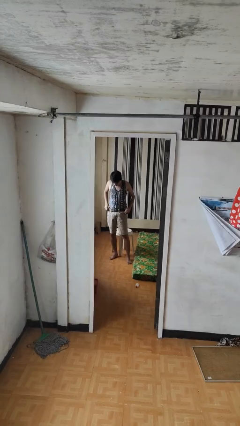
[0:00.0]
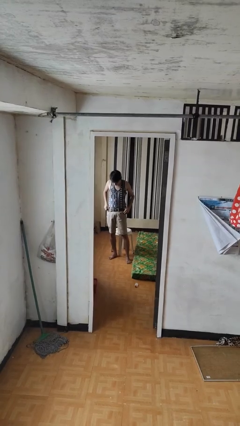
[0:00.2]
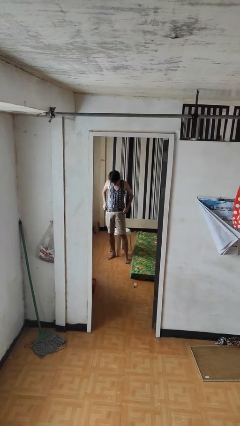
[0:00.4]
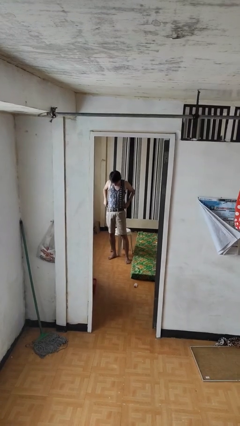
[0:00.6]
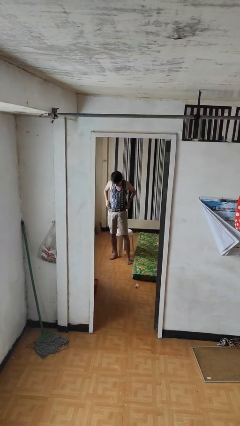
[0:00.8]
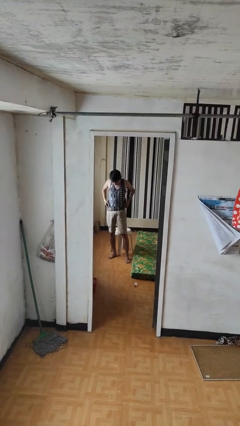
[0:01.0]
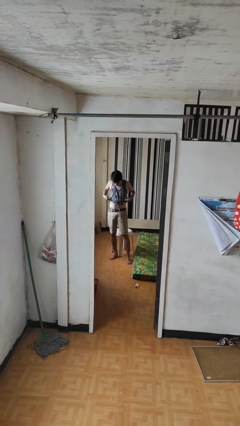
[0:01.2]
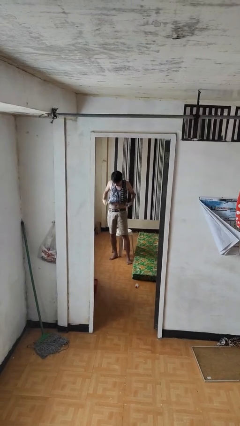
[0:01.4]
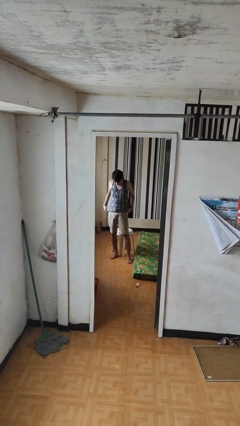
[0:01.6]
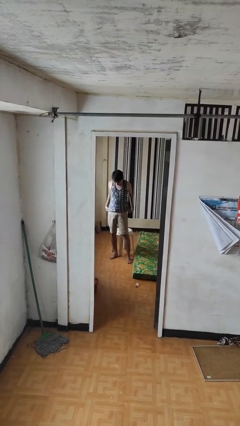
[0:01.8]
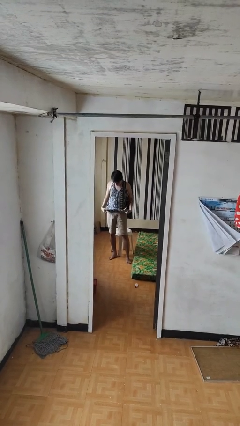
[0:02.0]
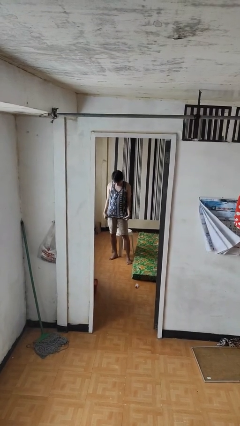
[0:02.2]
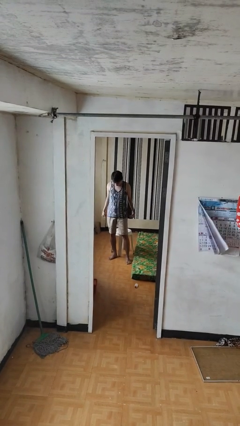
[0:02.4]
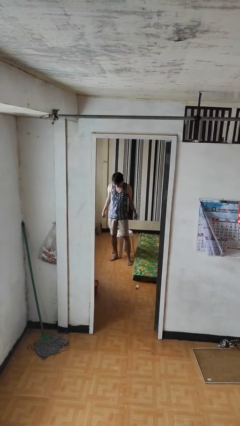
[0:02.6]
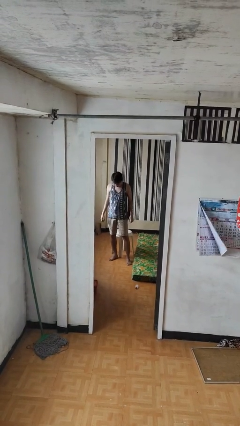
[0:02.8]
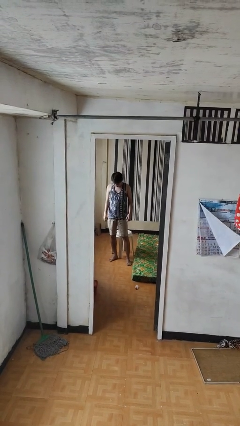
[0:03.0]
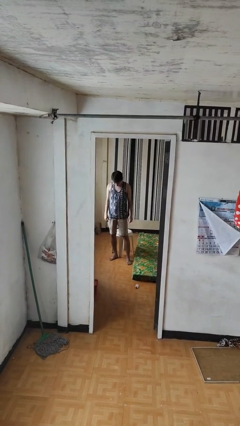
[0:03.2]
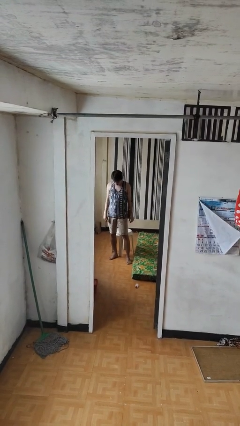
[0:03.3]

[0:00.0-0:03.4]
person untucks shirt

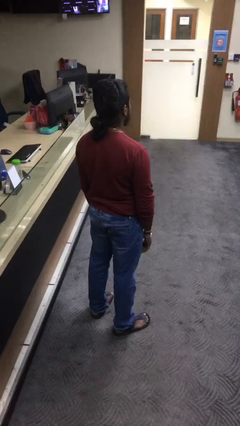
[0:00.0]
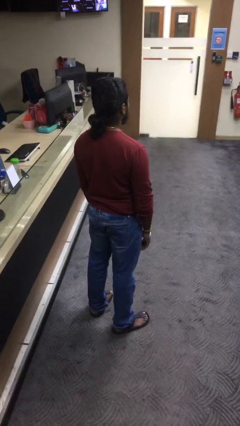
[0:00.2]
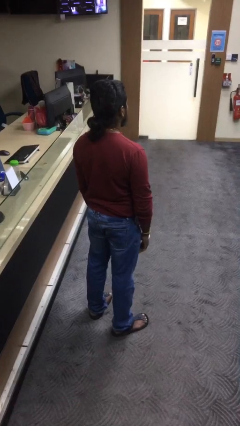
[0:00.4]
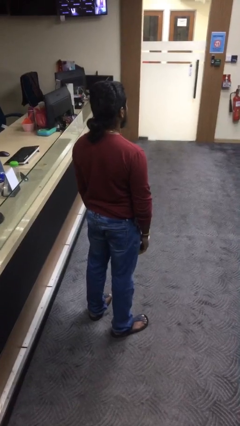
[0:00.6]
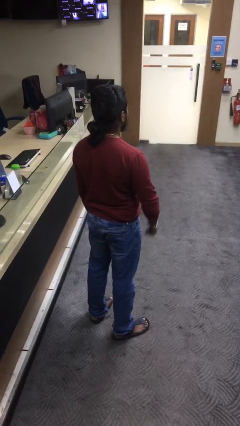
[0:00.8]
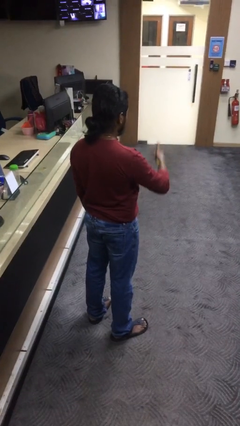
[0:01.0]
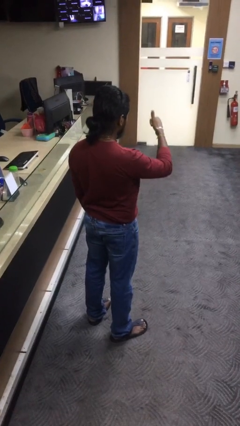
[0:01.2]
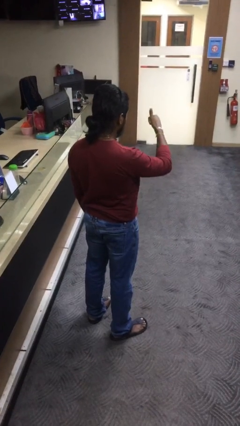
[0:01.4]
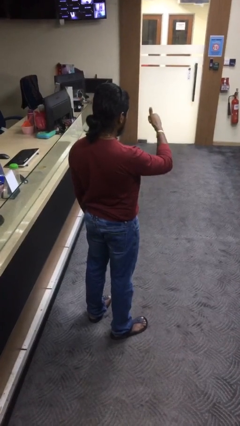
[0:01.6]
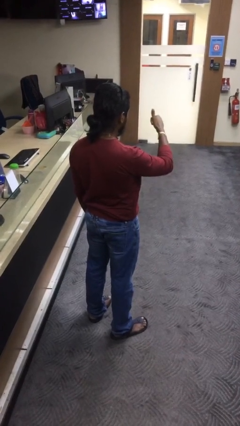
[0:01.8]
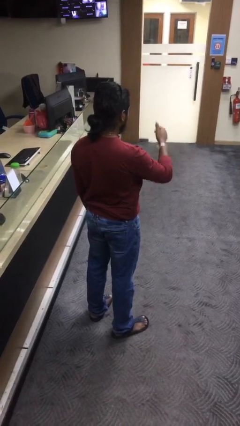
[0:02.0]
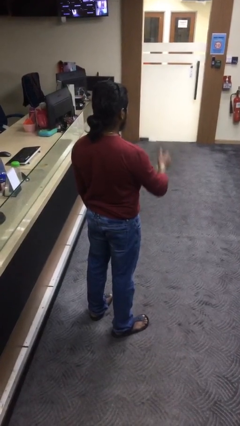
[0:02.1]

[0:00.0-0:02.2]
person gestures thumbs up

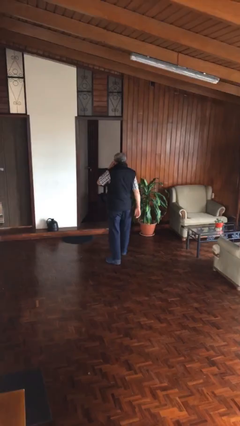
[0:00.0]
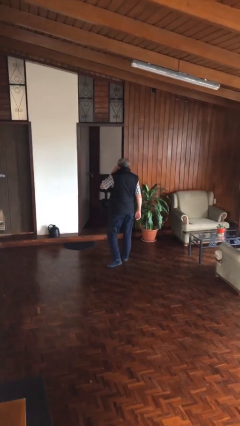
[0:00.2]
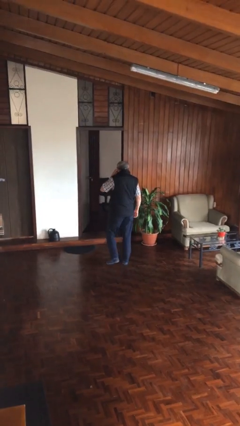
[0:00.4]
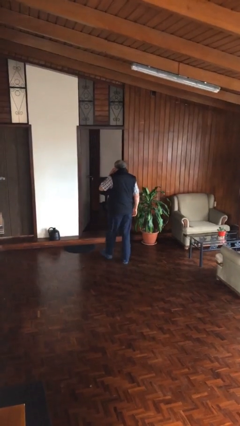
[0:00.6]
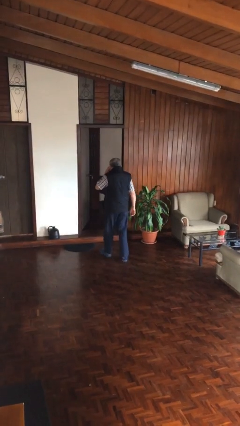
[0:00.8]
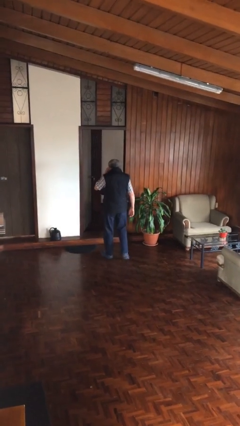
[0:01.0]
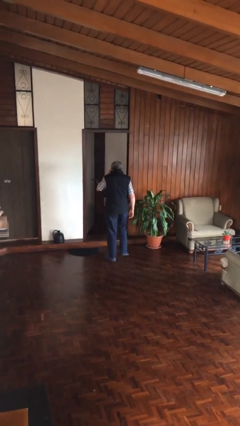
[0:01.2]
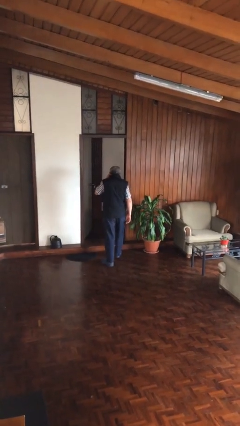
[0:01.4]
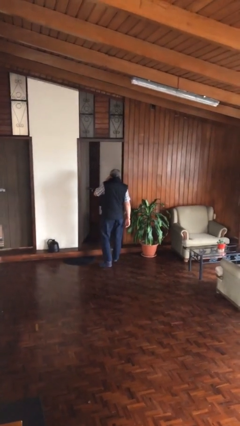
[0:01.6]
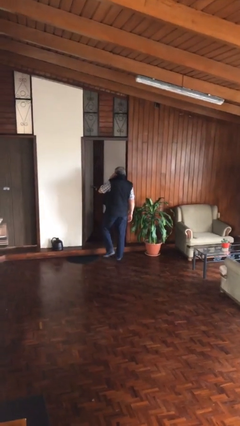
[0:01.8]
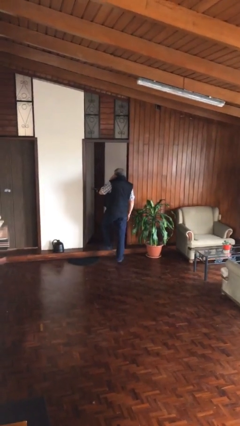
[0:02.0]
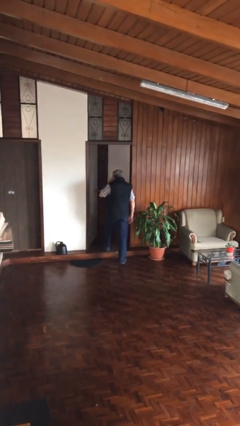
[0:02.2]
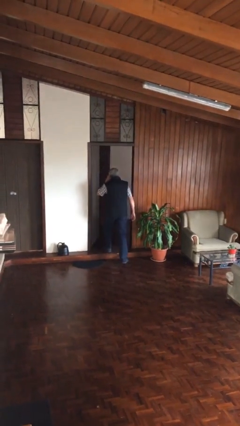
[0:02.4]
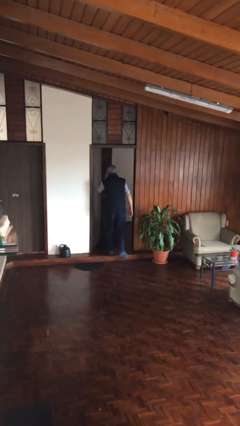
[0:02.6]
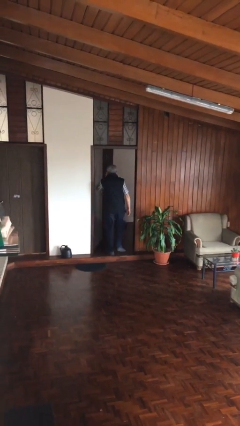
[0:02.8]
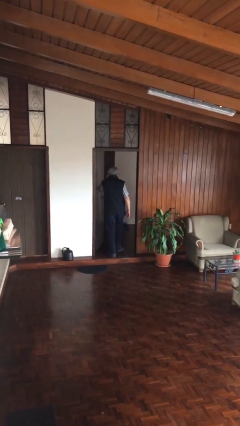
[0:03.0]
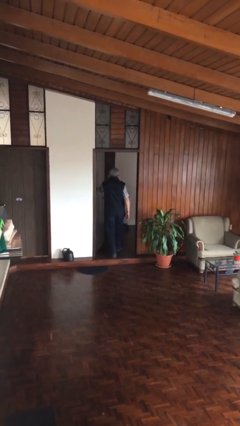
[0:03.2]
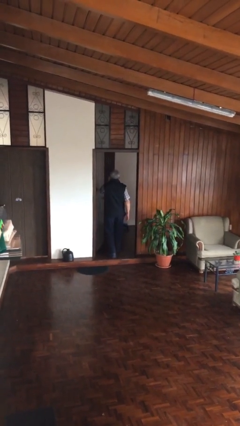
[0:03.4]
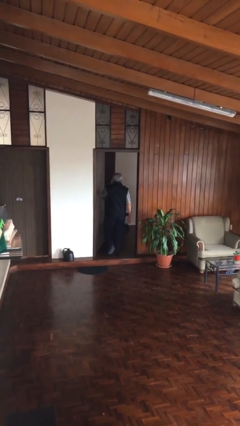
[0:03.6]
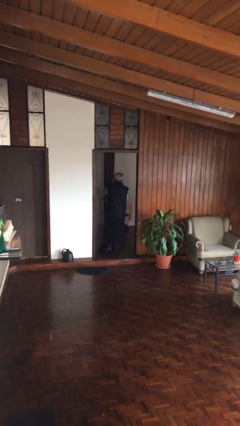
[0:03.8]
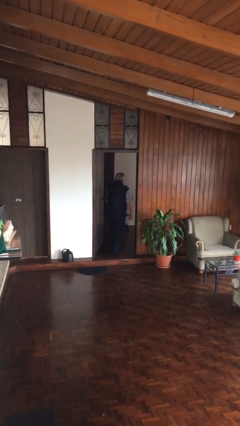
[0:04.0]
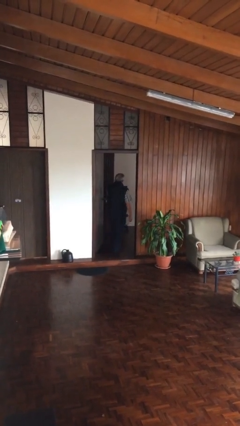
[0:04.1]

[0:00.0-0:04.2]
person exits scene through structure

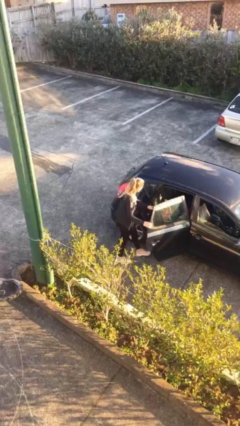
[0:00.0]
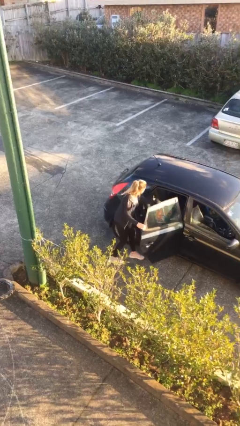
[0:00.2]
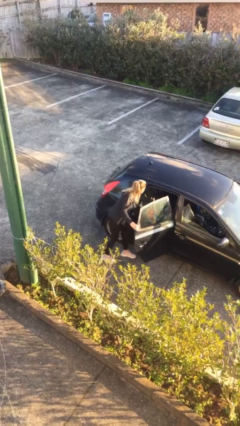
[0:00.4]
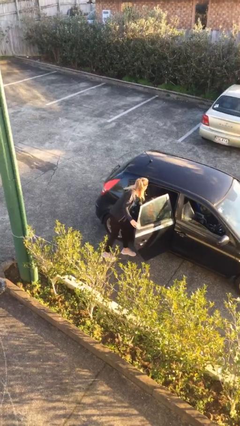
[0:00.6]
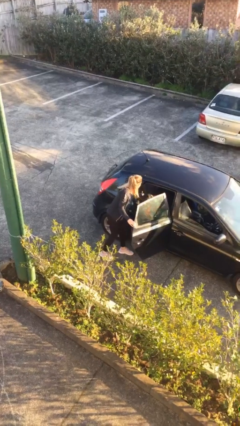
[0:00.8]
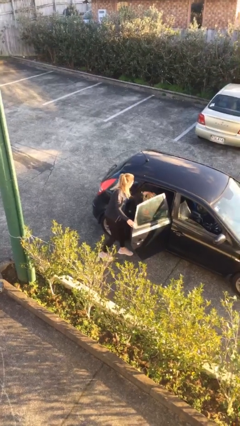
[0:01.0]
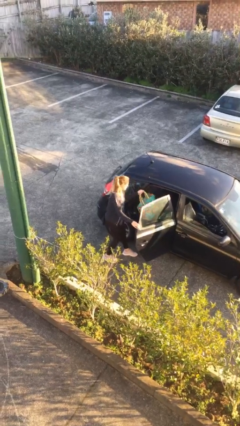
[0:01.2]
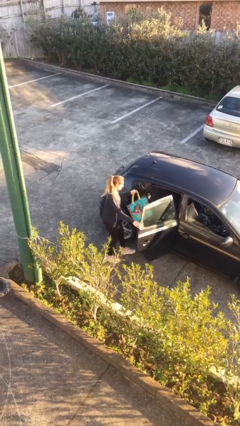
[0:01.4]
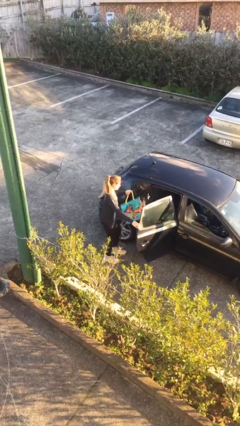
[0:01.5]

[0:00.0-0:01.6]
person unloads car

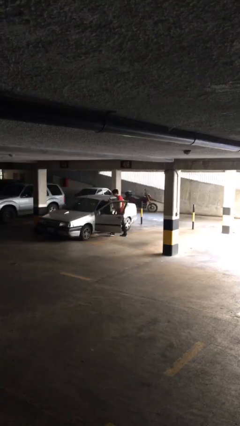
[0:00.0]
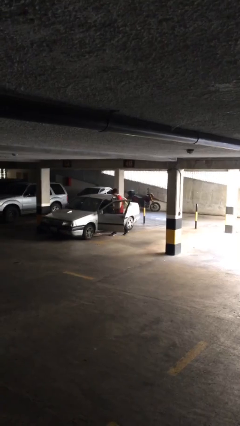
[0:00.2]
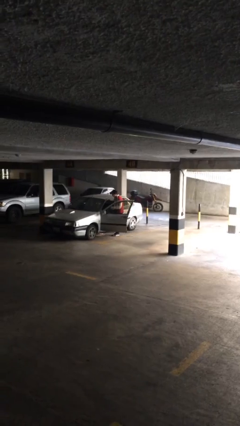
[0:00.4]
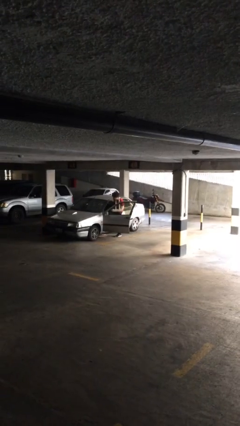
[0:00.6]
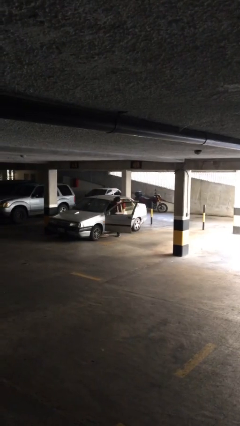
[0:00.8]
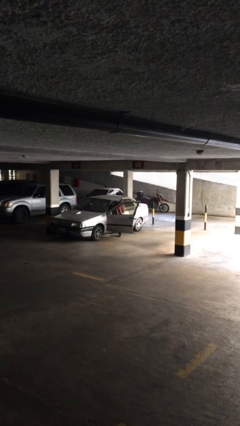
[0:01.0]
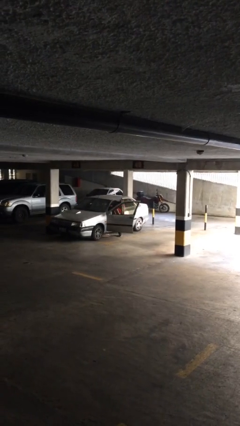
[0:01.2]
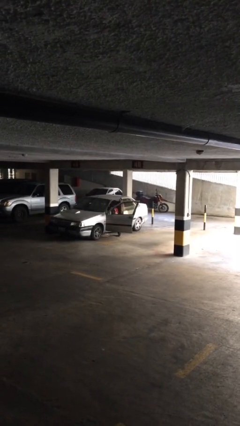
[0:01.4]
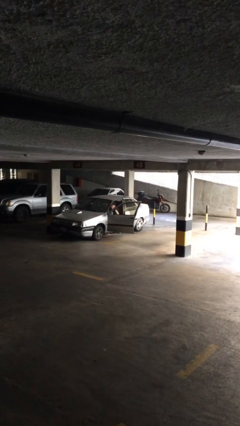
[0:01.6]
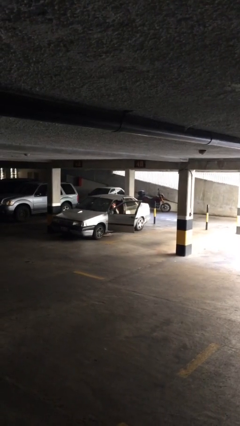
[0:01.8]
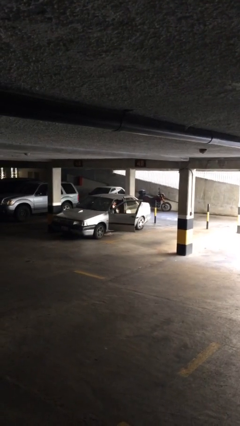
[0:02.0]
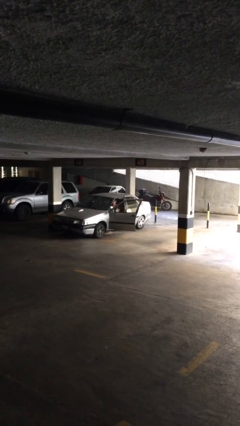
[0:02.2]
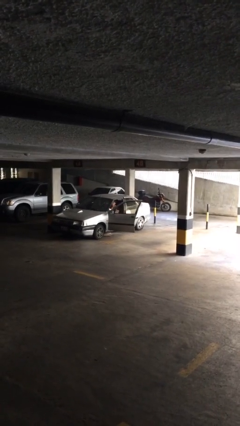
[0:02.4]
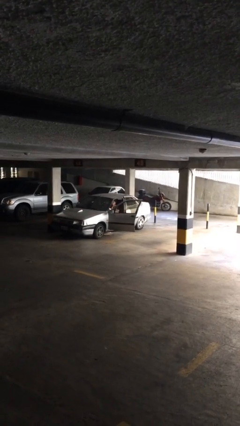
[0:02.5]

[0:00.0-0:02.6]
person enters car

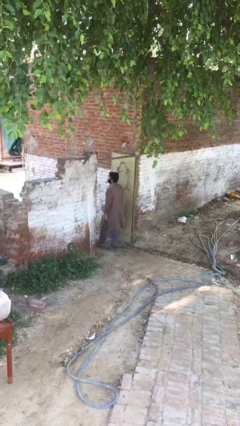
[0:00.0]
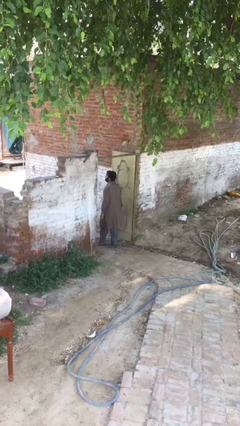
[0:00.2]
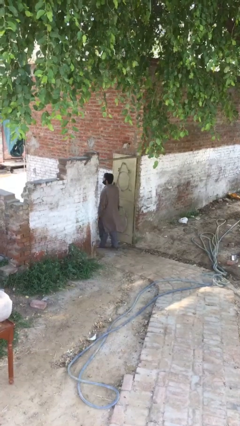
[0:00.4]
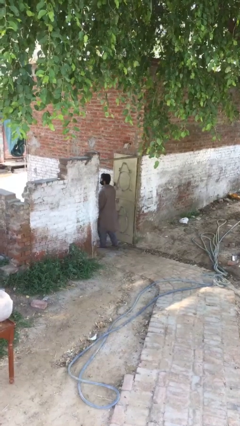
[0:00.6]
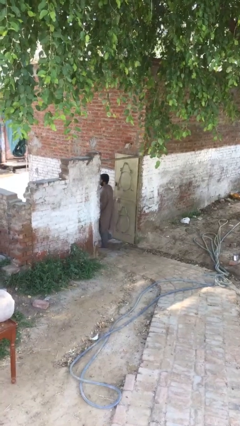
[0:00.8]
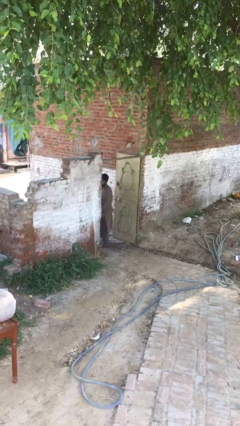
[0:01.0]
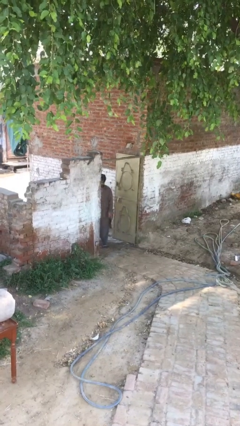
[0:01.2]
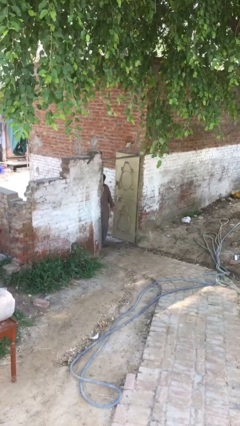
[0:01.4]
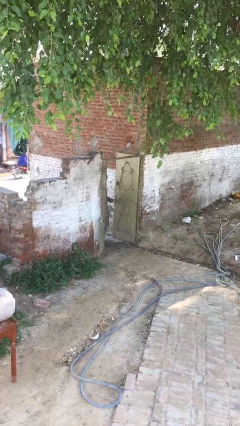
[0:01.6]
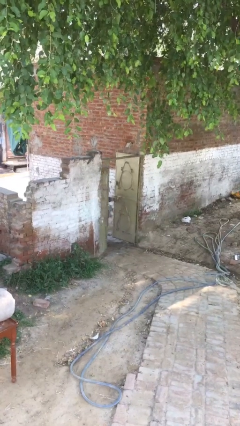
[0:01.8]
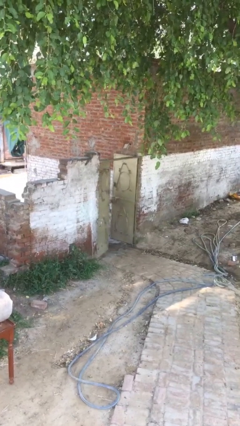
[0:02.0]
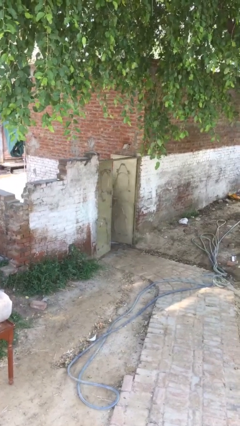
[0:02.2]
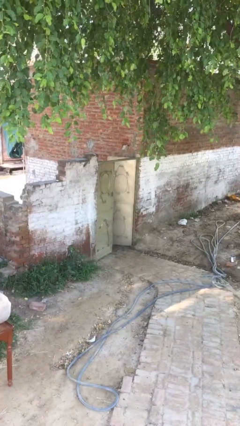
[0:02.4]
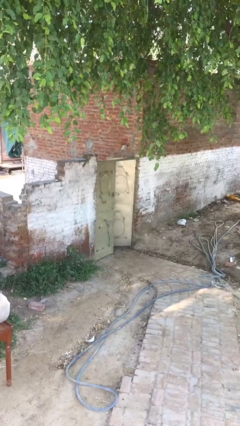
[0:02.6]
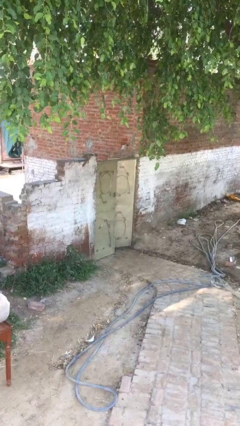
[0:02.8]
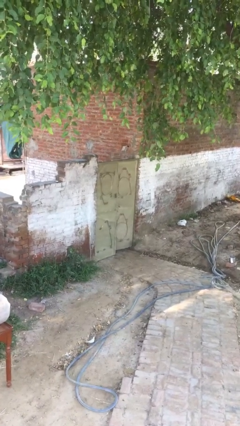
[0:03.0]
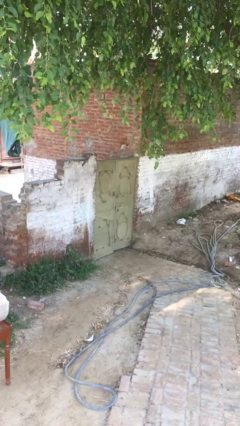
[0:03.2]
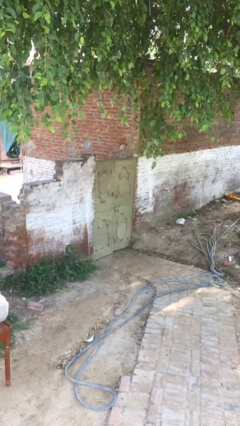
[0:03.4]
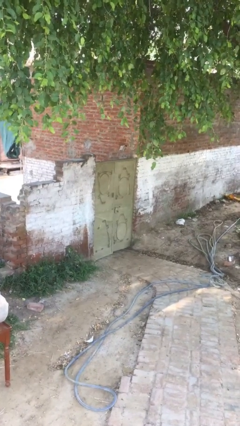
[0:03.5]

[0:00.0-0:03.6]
person closes facility door
